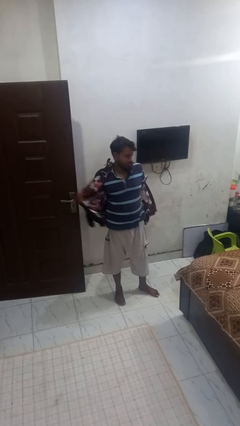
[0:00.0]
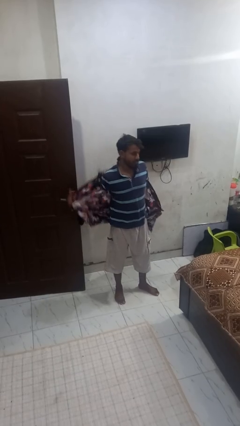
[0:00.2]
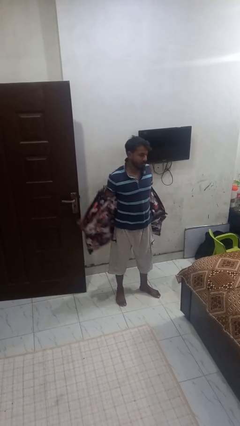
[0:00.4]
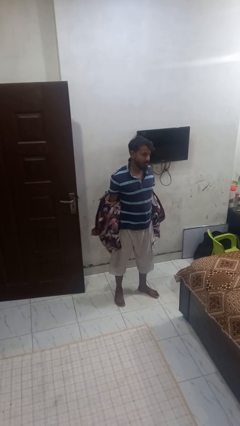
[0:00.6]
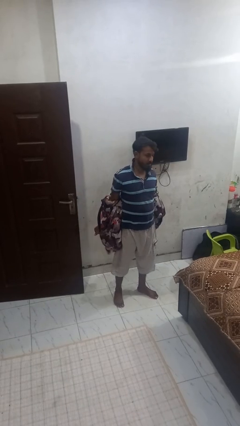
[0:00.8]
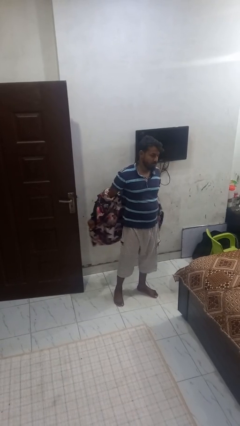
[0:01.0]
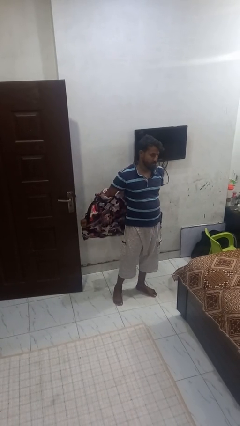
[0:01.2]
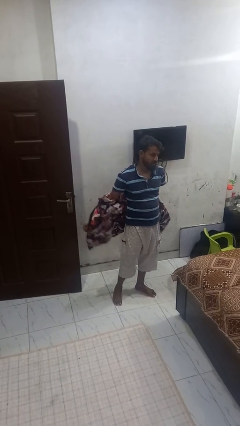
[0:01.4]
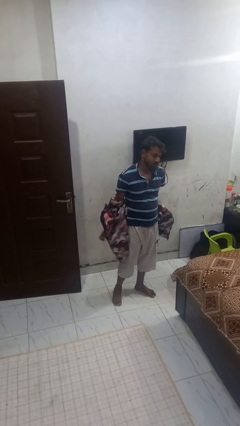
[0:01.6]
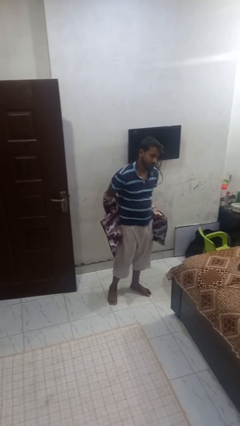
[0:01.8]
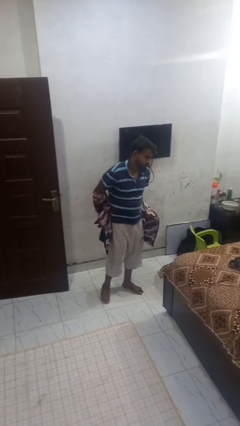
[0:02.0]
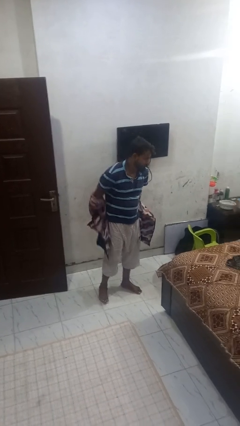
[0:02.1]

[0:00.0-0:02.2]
person takes off jacket

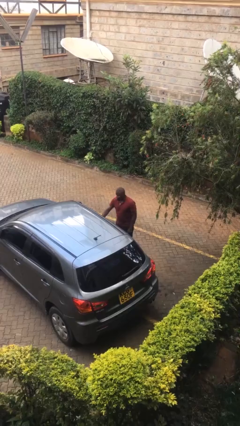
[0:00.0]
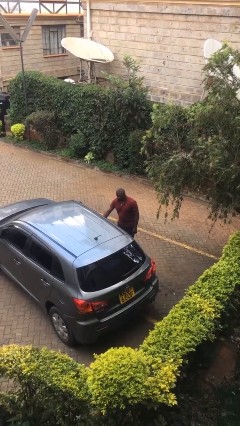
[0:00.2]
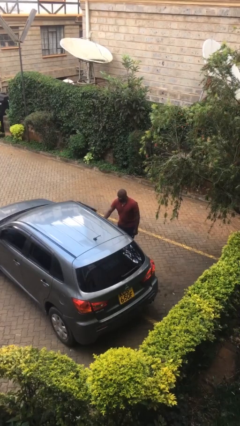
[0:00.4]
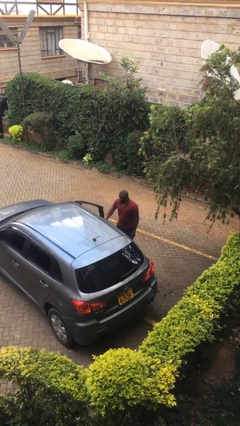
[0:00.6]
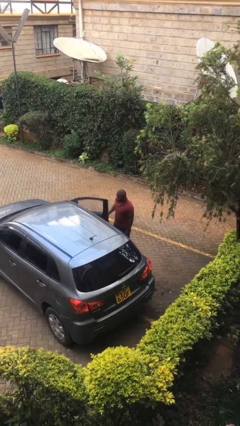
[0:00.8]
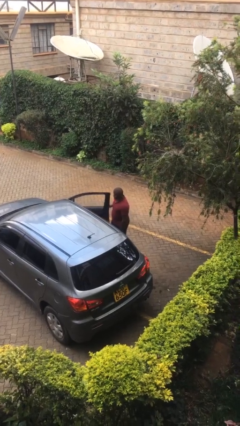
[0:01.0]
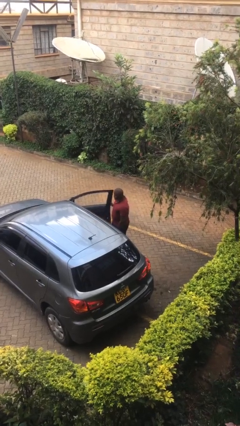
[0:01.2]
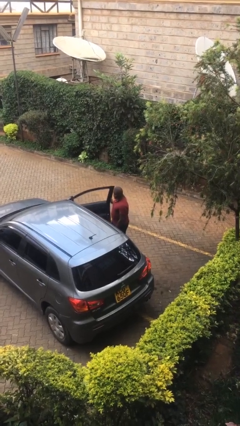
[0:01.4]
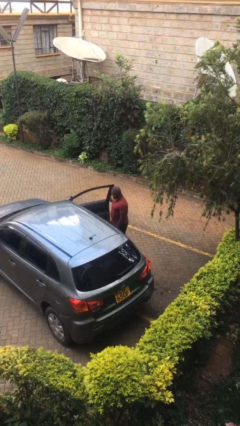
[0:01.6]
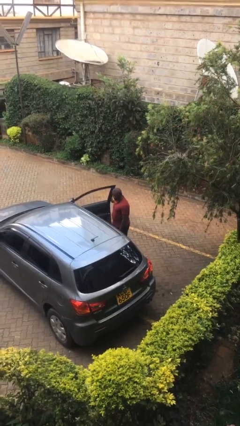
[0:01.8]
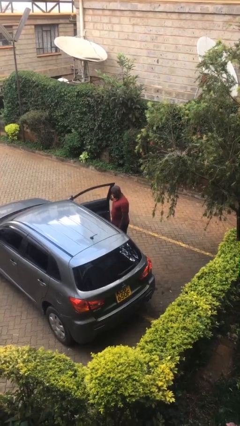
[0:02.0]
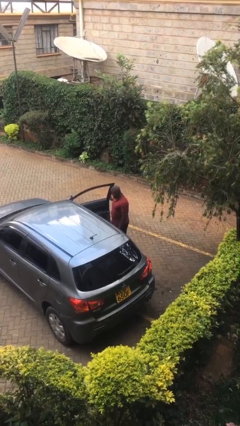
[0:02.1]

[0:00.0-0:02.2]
person opens car door

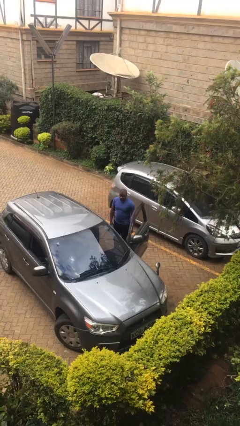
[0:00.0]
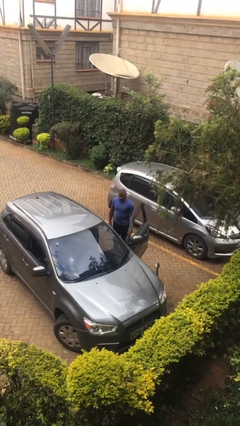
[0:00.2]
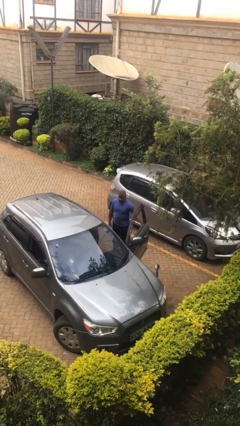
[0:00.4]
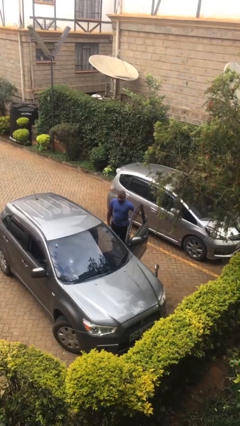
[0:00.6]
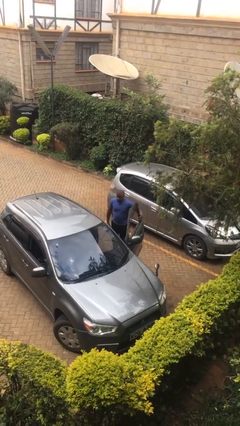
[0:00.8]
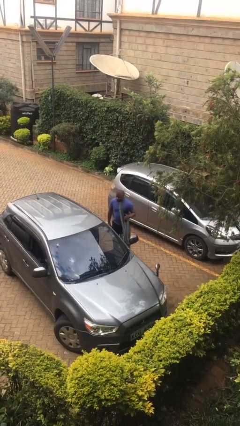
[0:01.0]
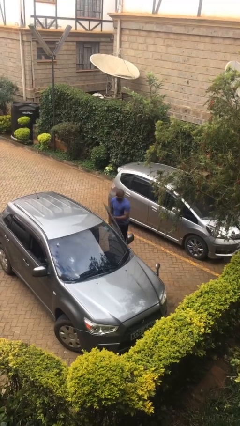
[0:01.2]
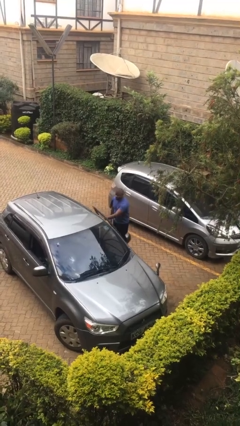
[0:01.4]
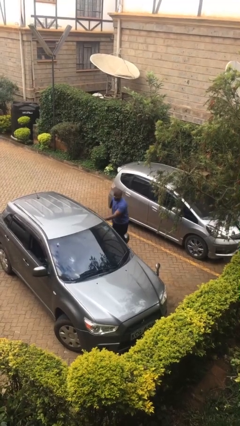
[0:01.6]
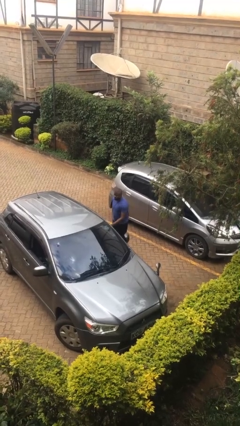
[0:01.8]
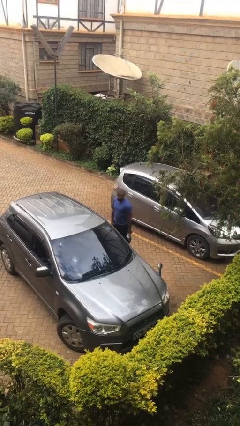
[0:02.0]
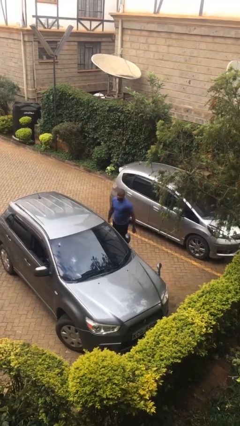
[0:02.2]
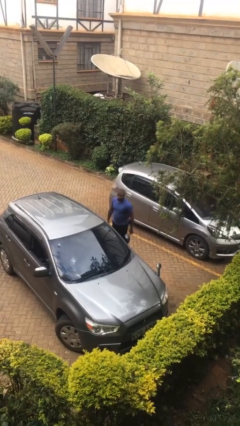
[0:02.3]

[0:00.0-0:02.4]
person closes car door

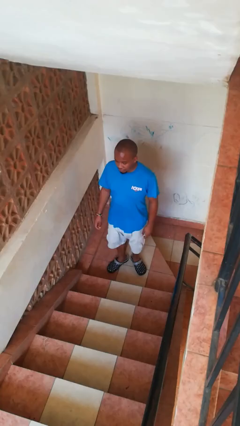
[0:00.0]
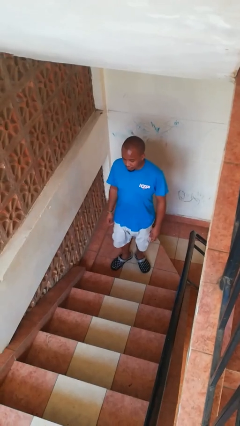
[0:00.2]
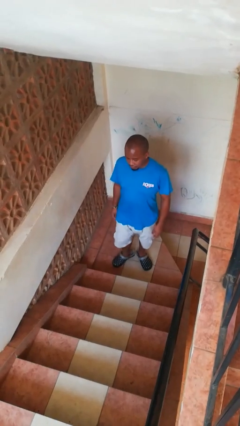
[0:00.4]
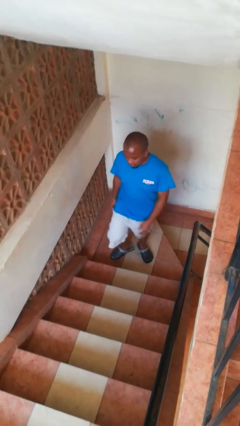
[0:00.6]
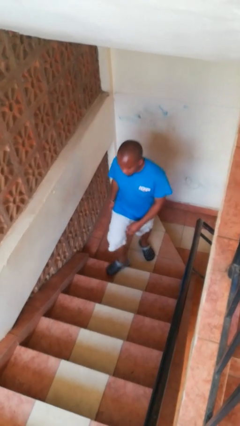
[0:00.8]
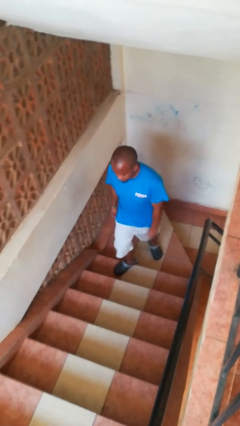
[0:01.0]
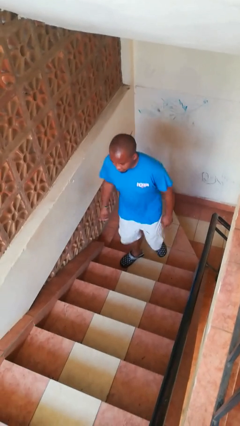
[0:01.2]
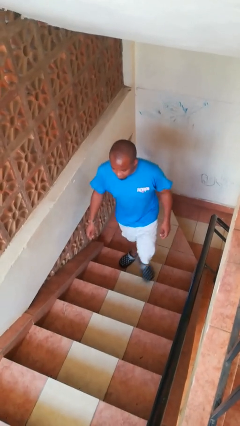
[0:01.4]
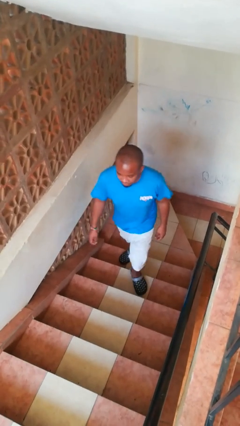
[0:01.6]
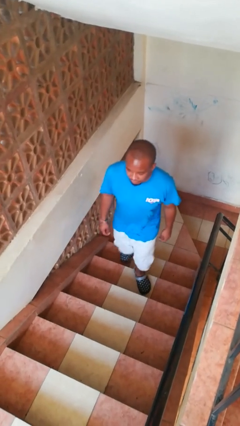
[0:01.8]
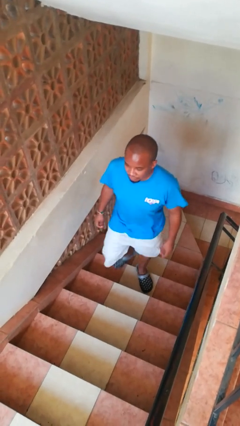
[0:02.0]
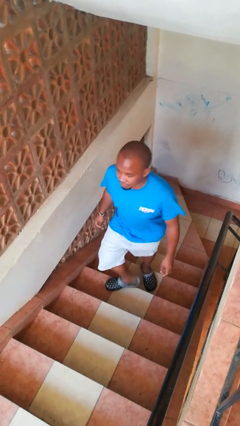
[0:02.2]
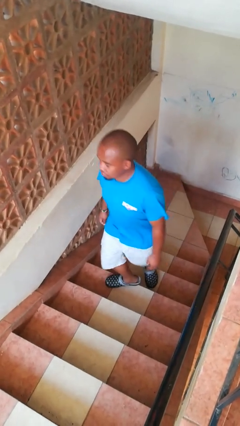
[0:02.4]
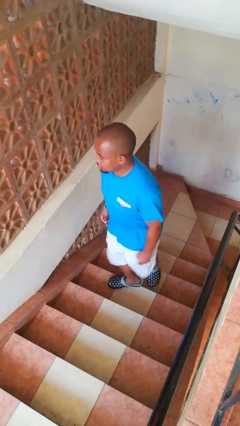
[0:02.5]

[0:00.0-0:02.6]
person climbs up stairs

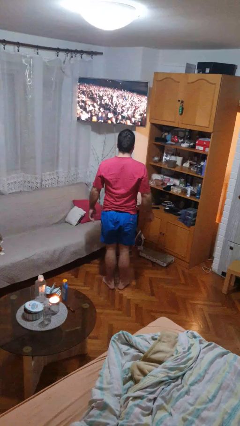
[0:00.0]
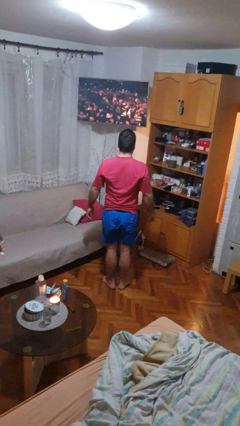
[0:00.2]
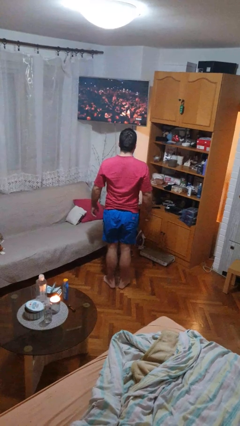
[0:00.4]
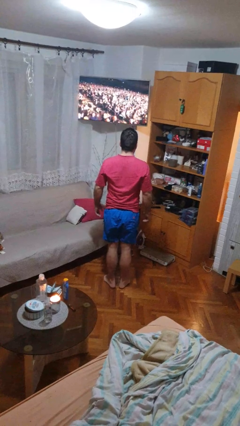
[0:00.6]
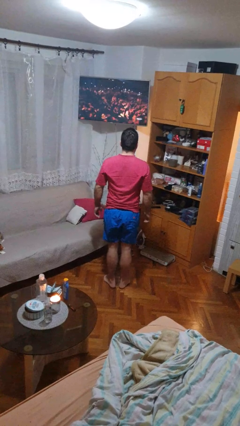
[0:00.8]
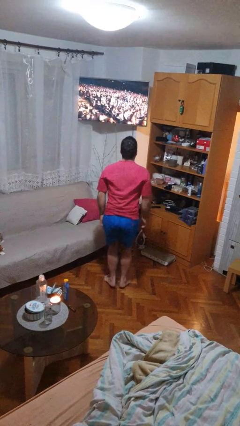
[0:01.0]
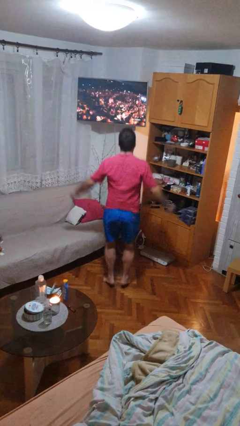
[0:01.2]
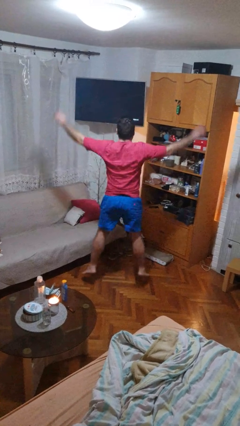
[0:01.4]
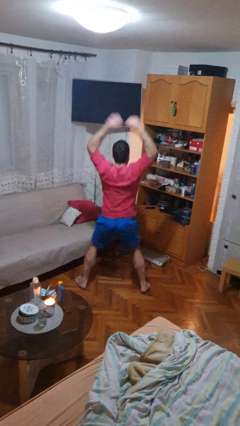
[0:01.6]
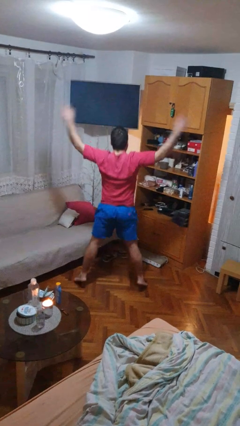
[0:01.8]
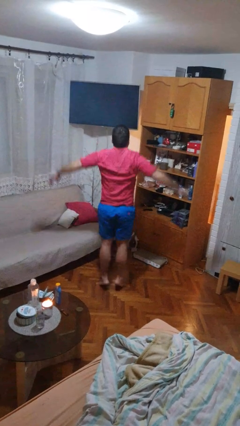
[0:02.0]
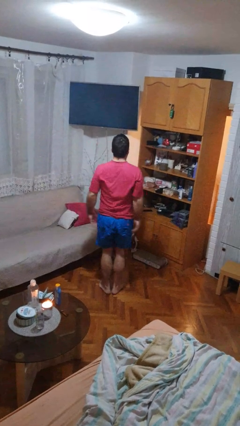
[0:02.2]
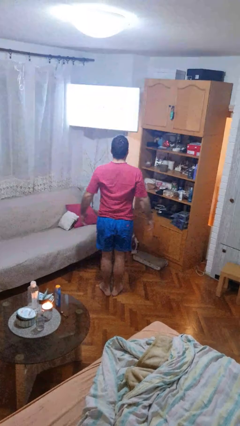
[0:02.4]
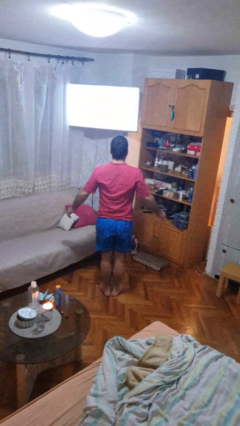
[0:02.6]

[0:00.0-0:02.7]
person exercises with jumping jacks

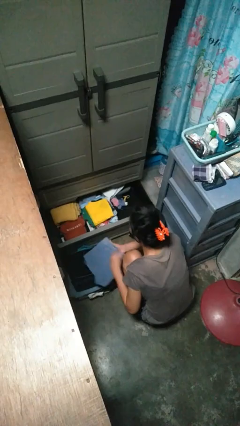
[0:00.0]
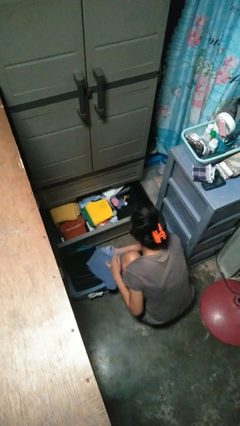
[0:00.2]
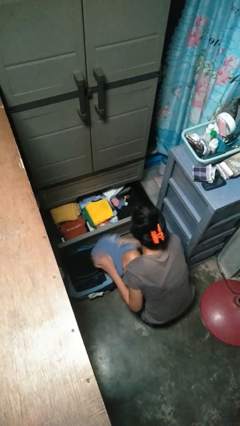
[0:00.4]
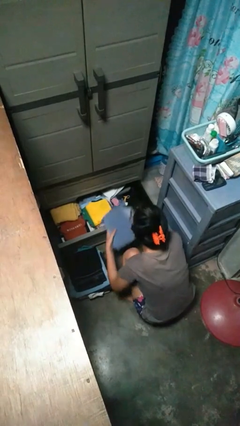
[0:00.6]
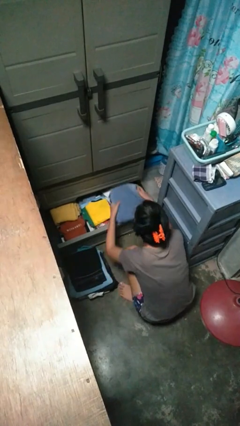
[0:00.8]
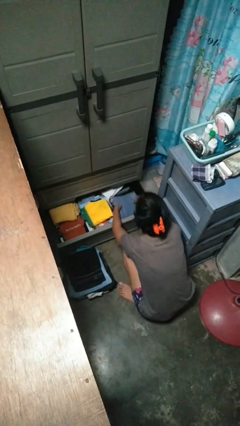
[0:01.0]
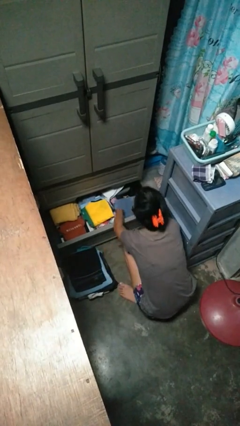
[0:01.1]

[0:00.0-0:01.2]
person puts clothes into dresser

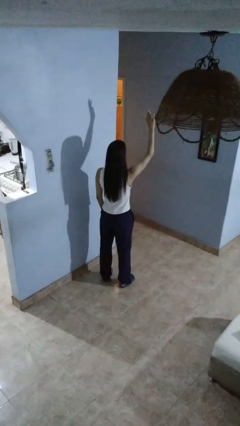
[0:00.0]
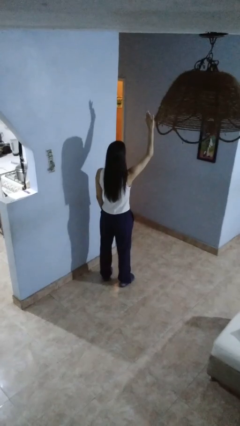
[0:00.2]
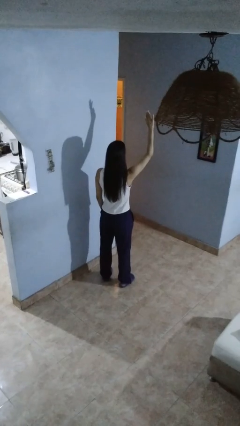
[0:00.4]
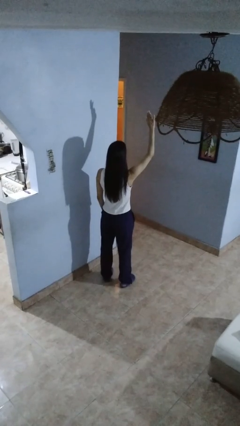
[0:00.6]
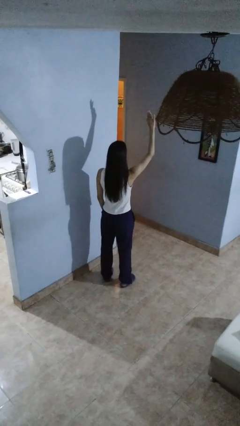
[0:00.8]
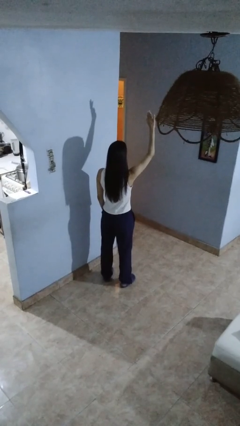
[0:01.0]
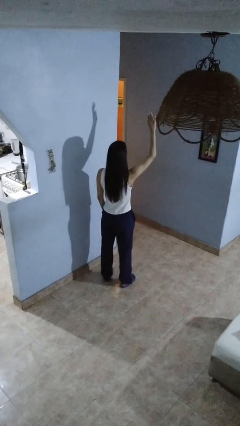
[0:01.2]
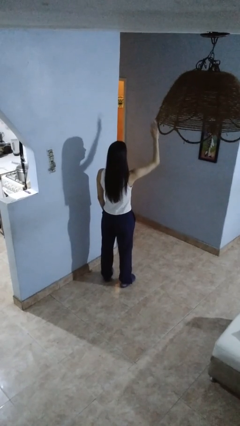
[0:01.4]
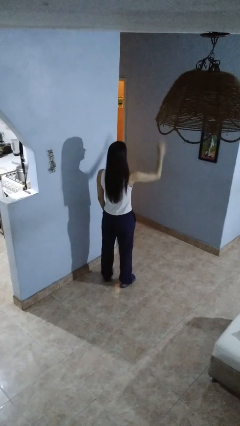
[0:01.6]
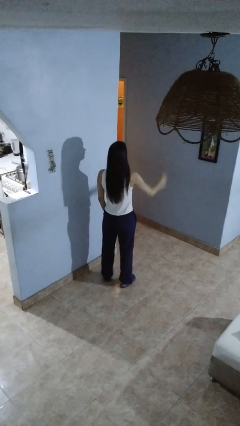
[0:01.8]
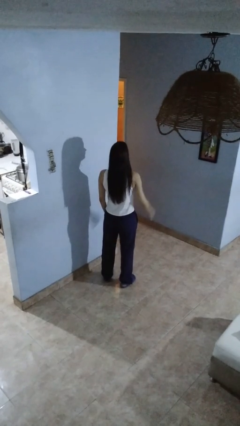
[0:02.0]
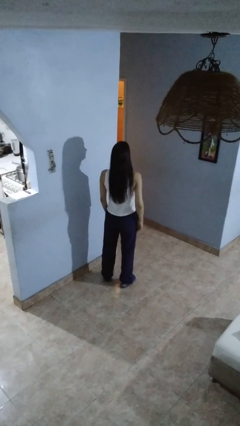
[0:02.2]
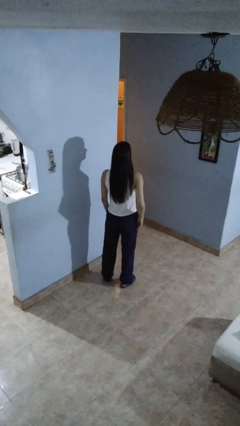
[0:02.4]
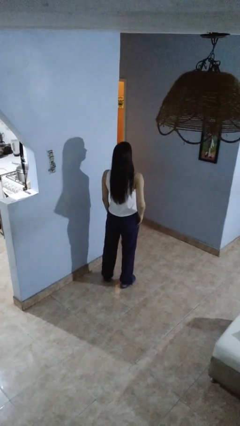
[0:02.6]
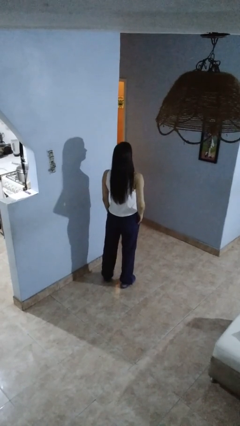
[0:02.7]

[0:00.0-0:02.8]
person gestures lower hand

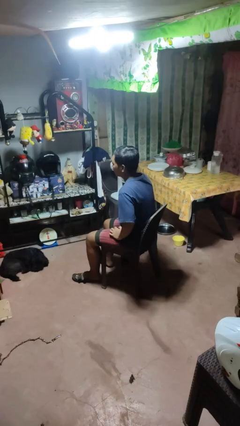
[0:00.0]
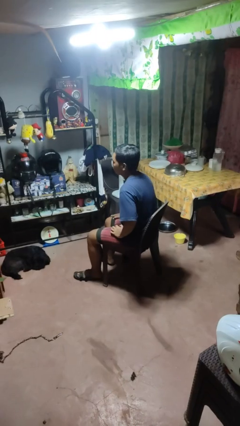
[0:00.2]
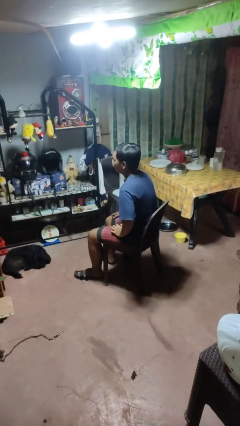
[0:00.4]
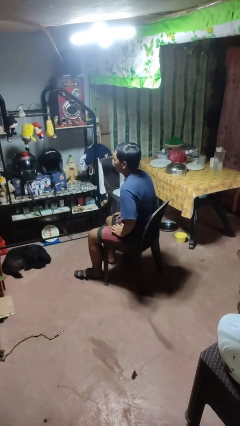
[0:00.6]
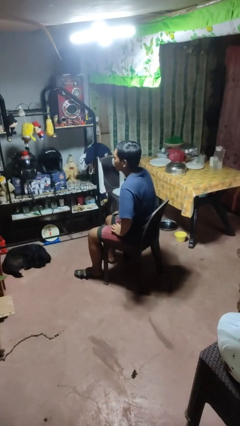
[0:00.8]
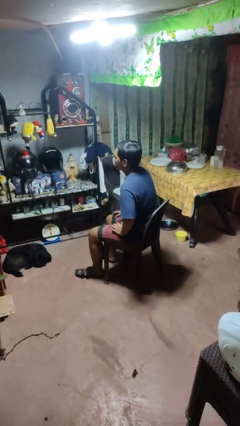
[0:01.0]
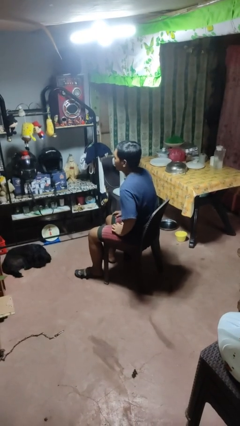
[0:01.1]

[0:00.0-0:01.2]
person slaps hands on thighs
